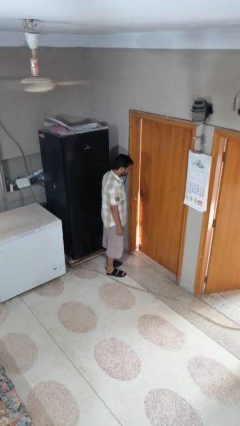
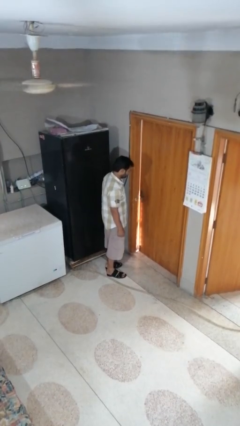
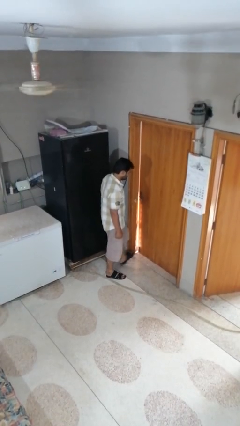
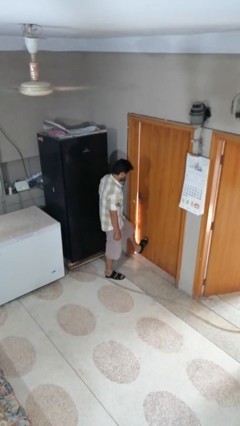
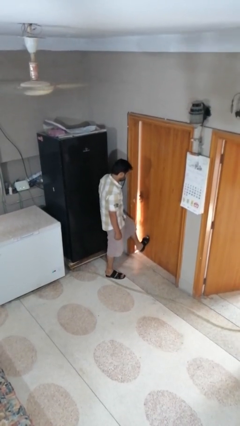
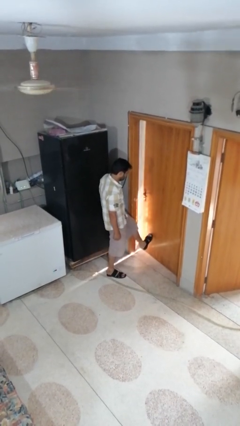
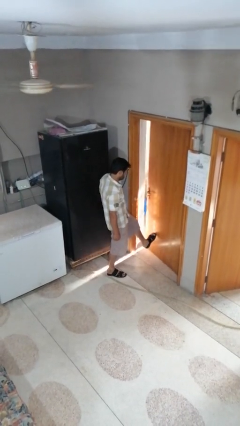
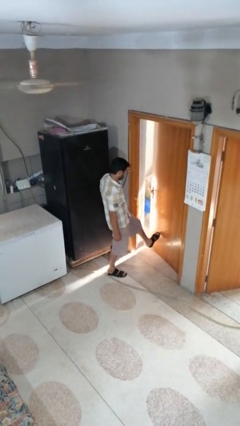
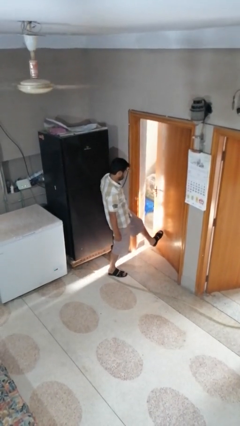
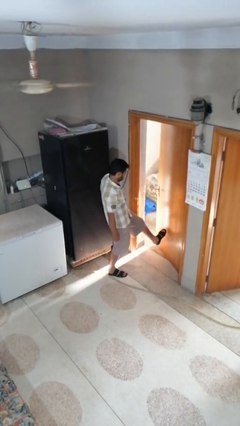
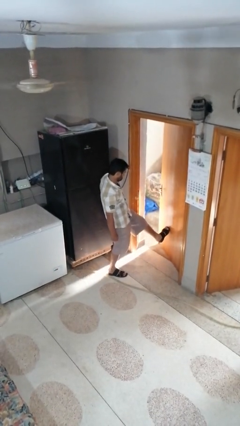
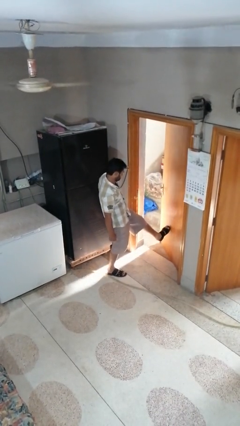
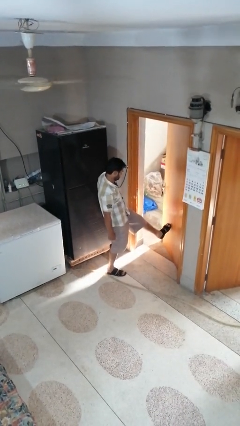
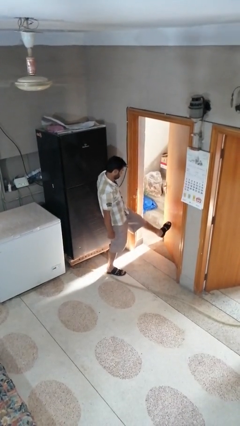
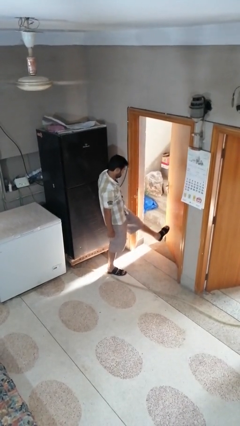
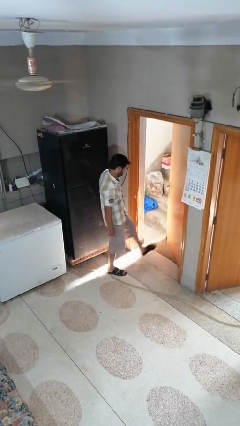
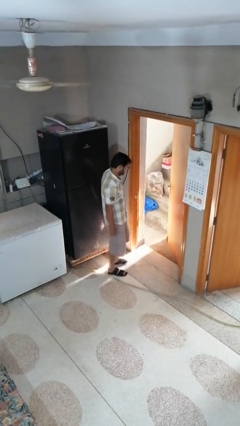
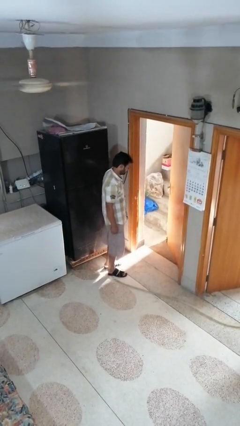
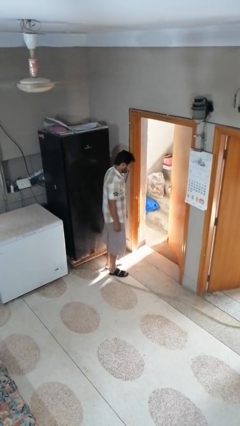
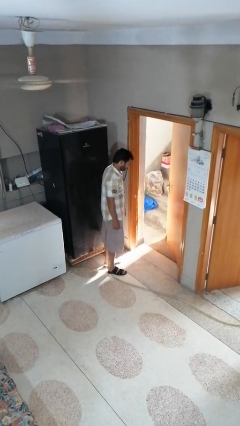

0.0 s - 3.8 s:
person opens facility door

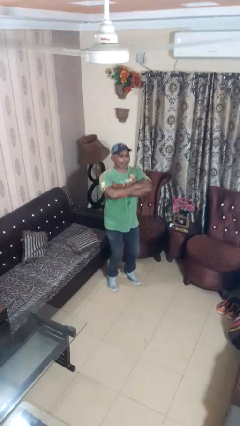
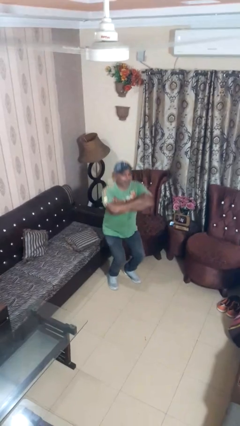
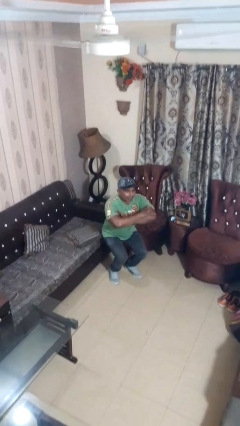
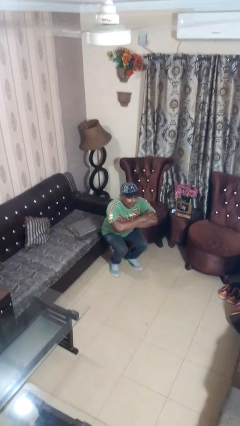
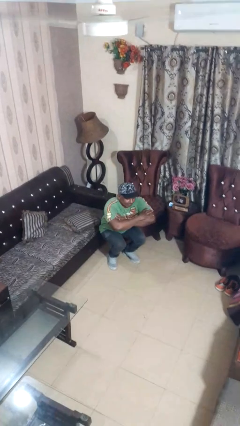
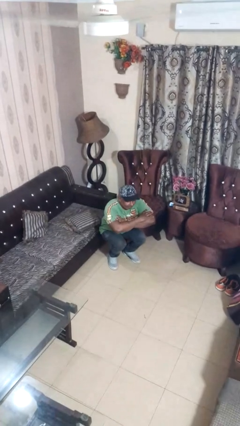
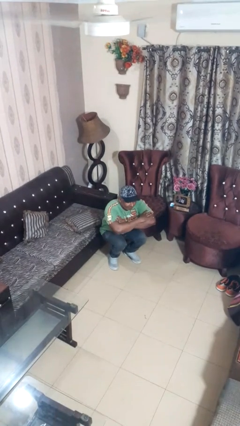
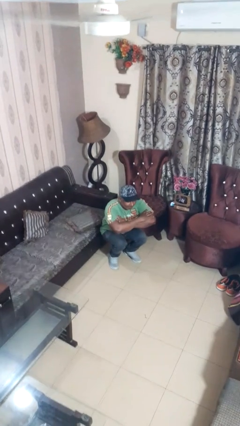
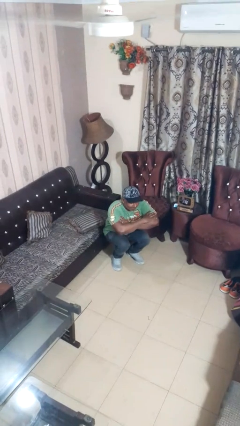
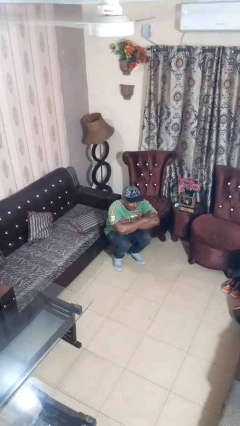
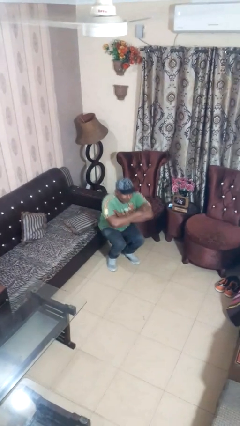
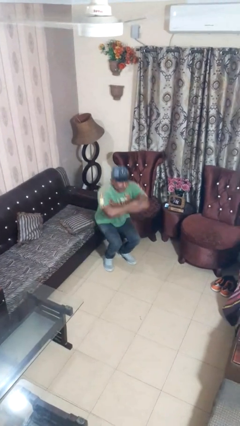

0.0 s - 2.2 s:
person squats

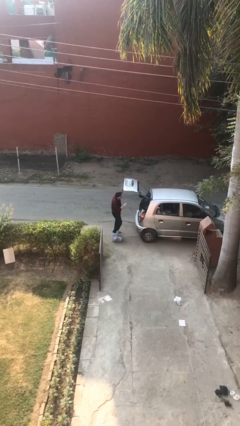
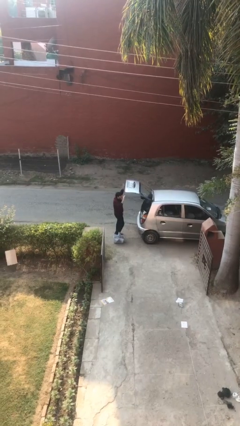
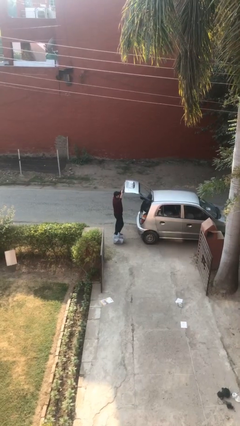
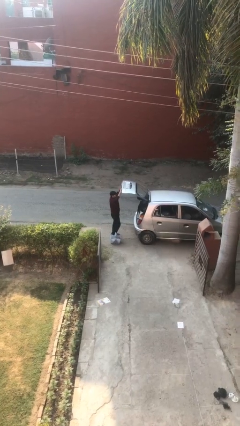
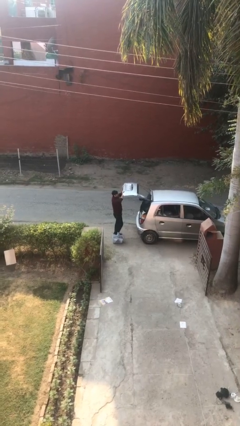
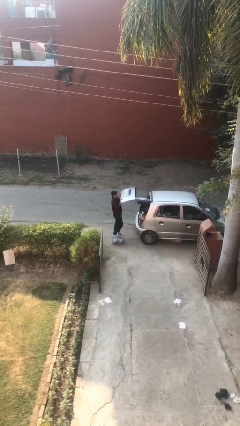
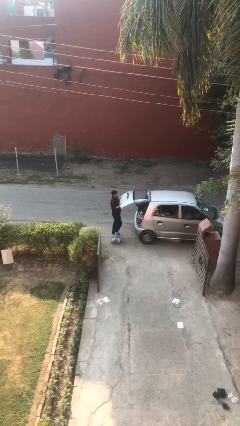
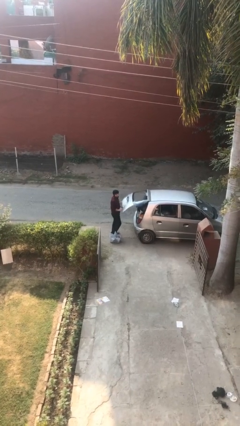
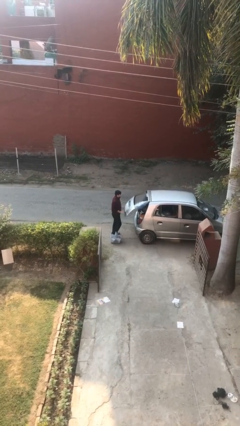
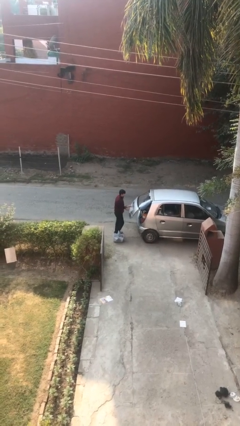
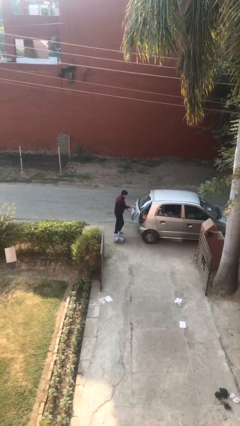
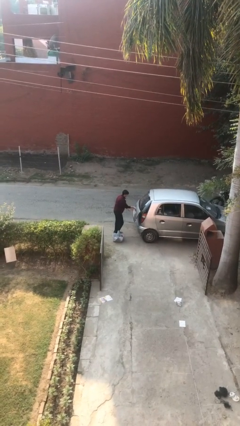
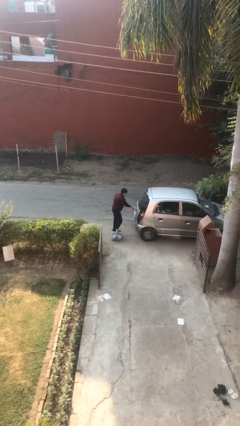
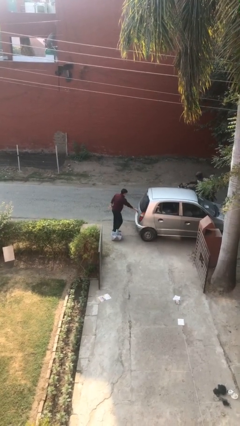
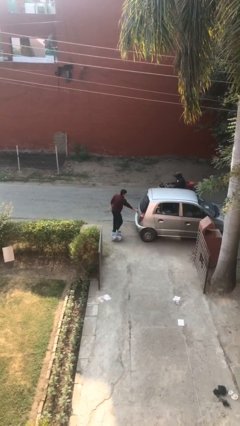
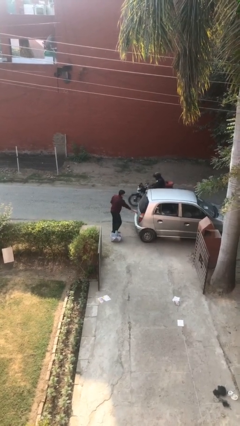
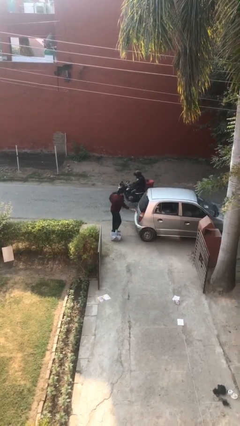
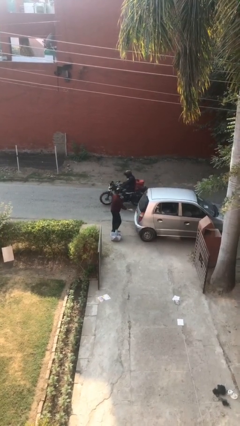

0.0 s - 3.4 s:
person closes car trunk

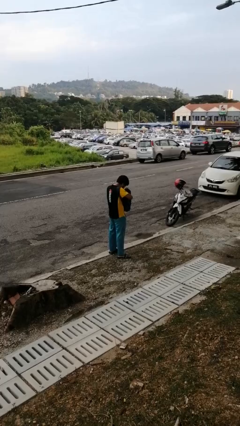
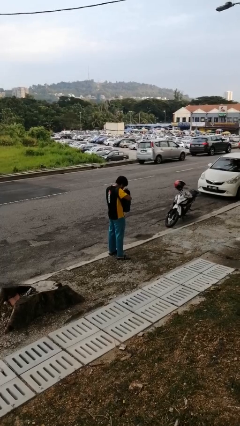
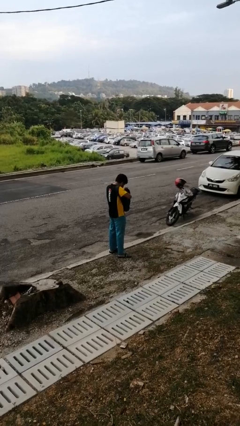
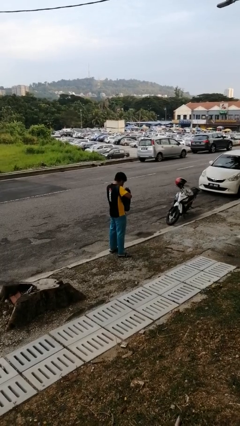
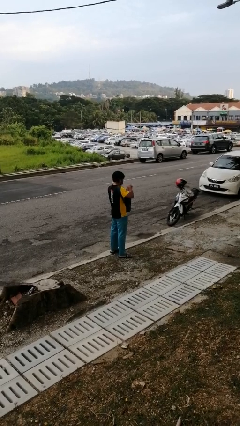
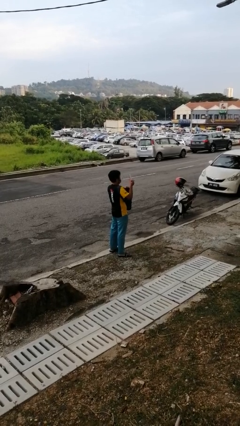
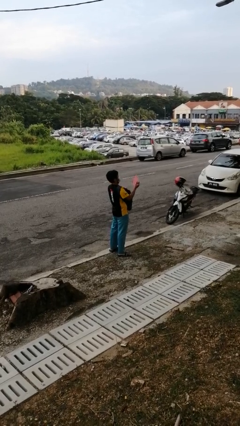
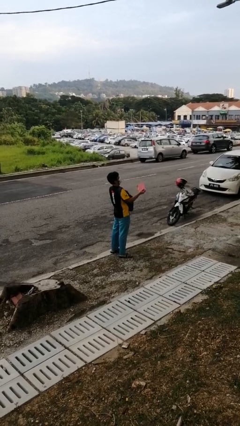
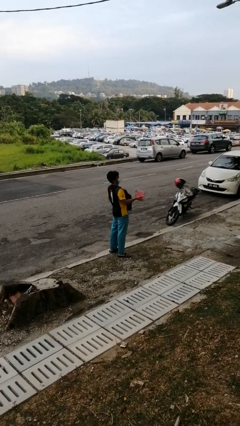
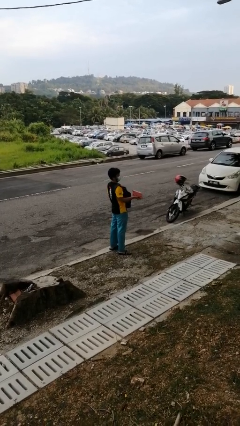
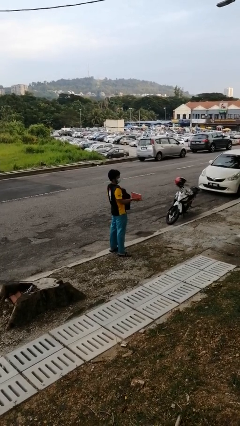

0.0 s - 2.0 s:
person takes object from backpack

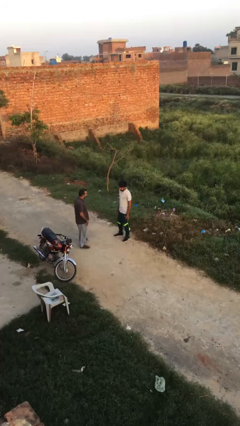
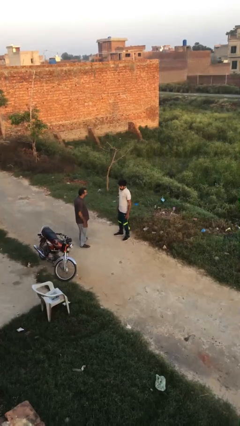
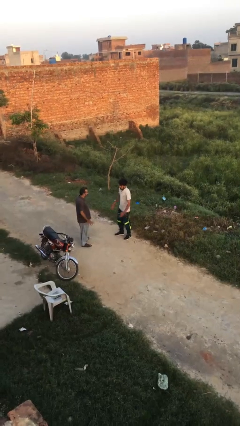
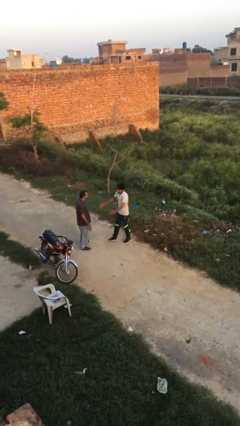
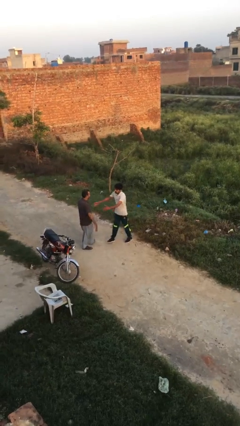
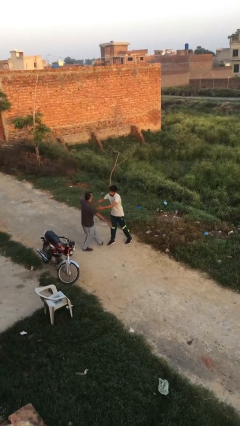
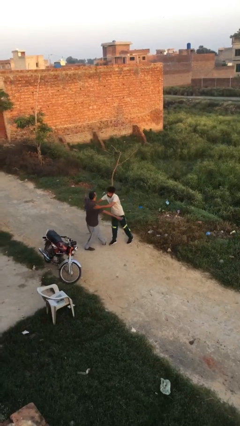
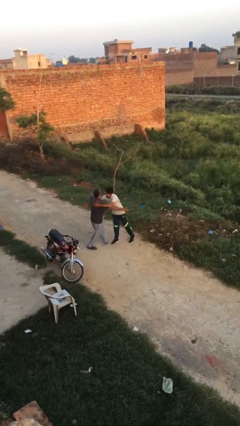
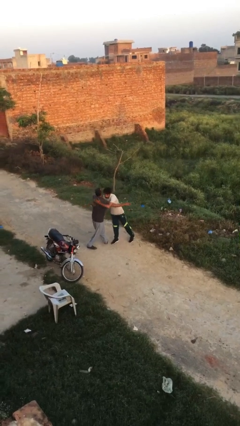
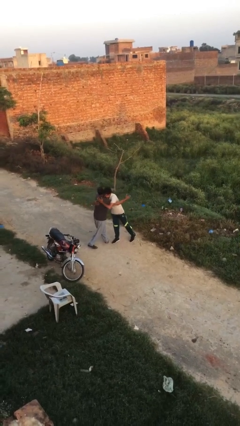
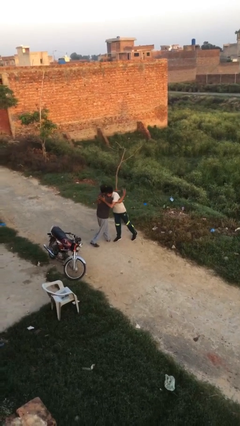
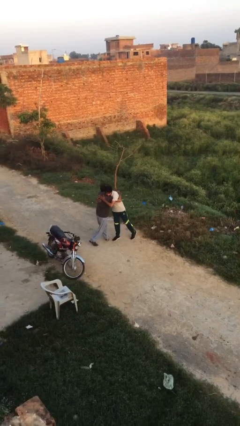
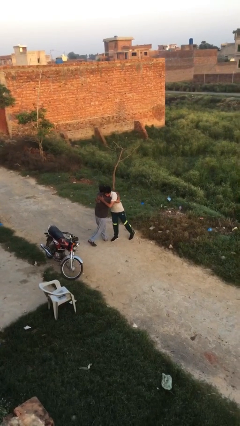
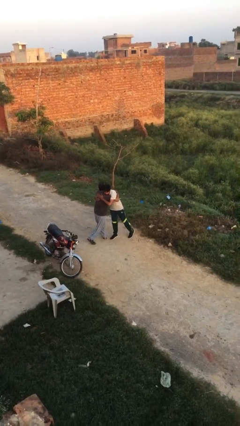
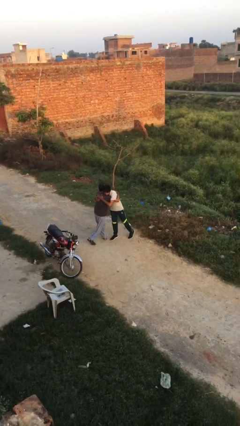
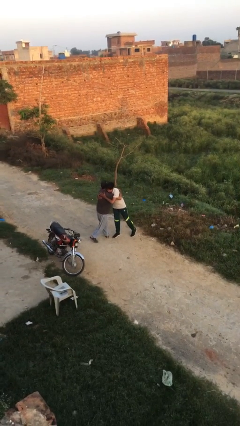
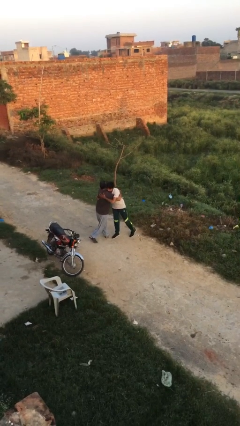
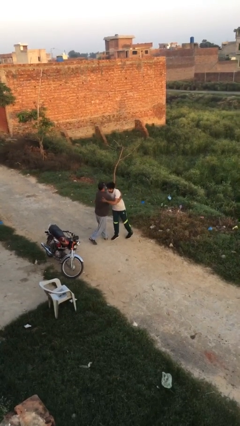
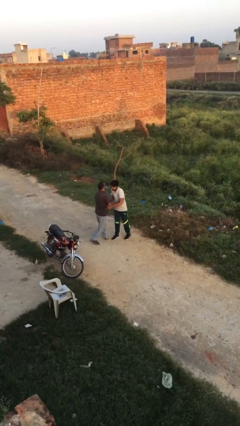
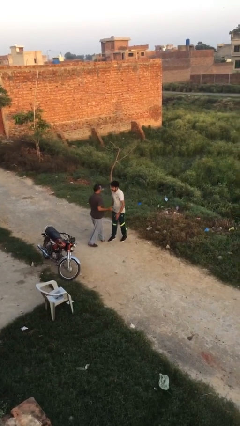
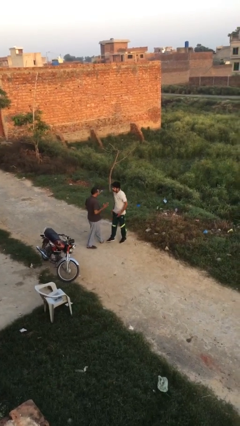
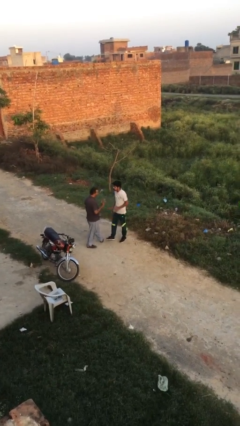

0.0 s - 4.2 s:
person embraces person

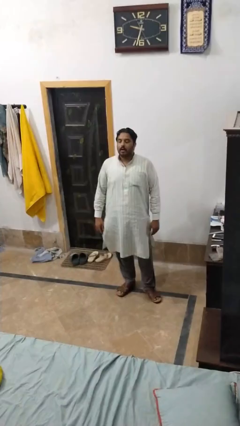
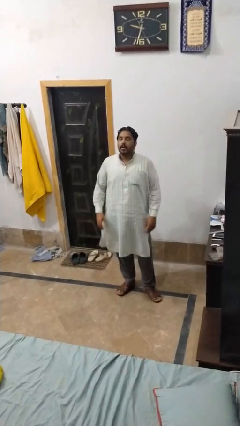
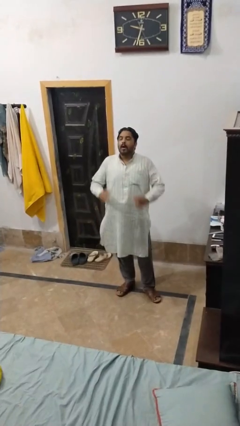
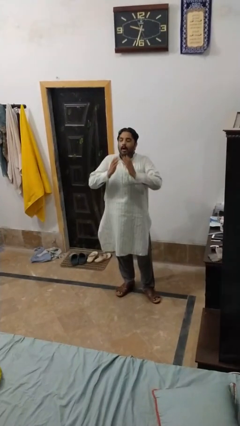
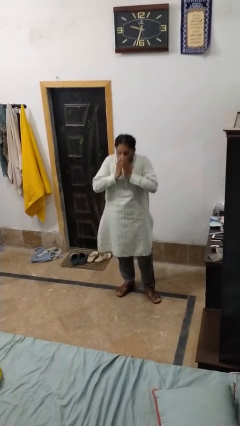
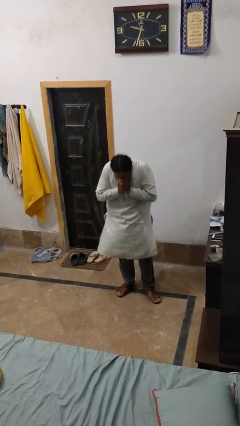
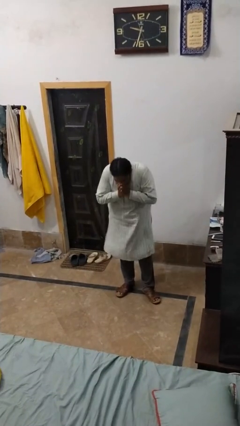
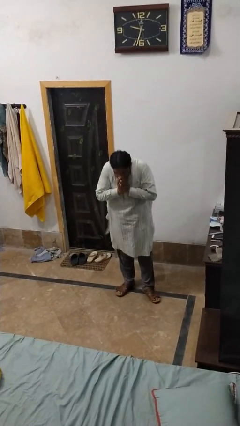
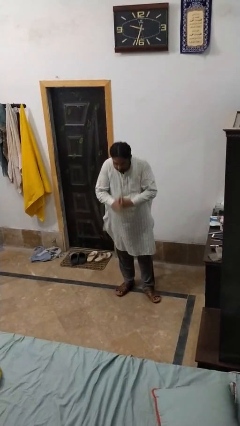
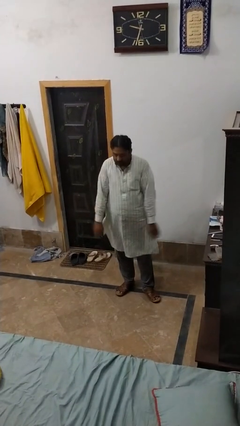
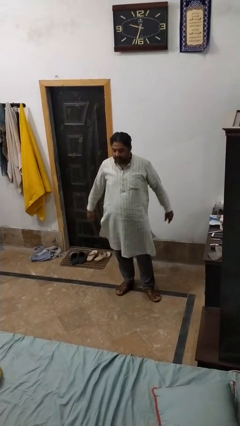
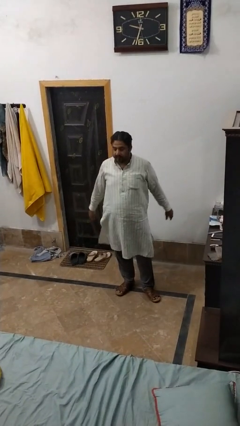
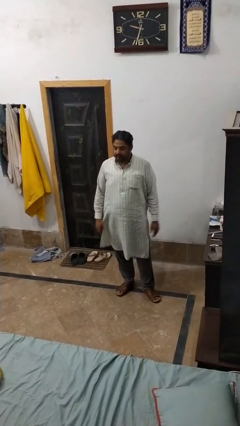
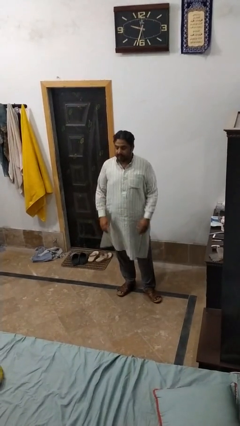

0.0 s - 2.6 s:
person sneezes into hand
